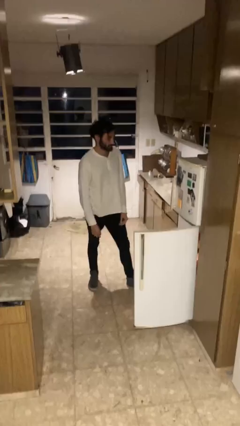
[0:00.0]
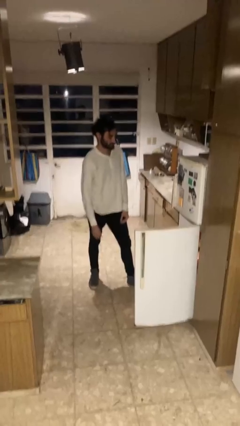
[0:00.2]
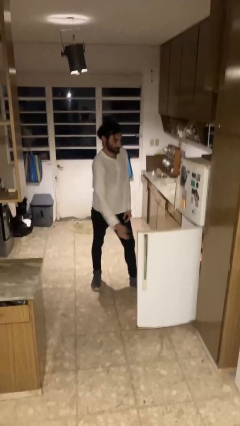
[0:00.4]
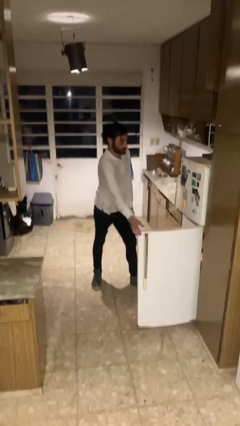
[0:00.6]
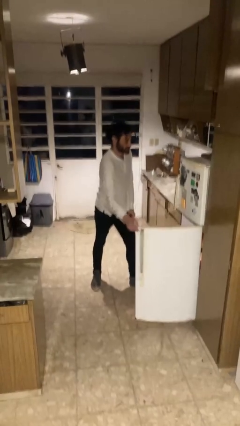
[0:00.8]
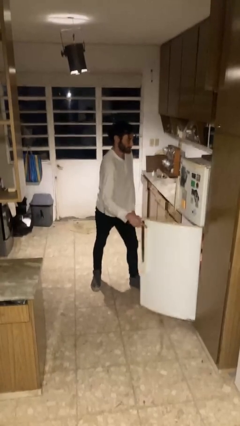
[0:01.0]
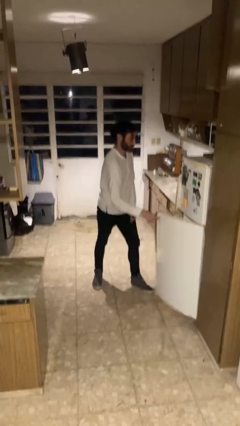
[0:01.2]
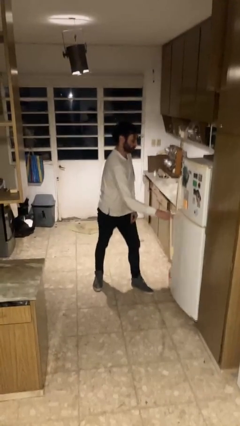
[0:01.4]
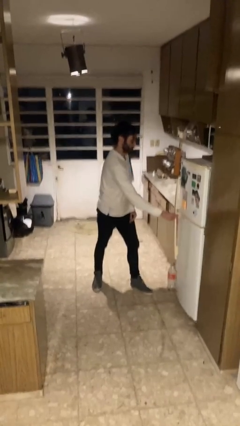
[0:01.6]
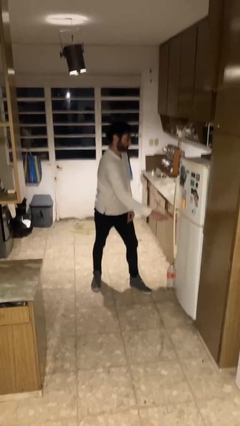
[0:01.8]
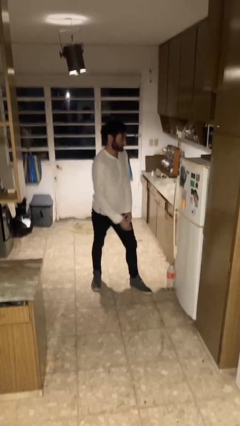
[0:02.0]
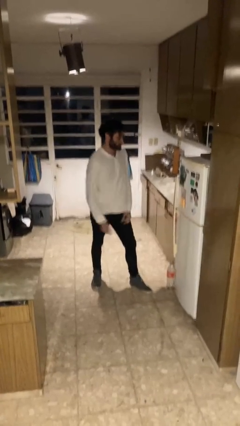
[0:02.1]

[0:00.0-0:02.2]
person closes refrigerator

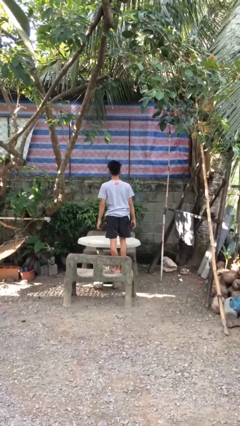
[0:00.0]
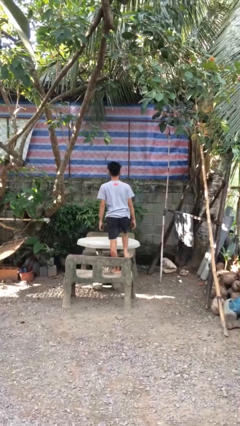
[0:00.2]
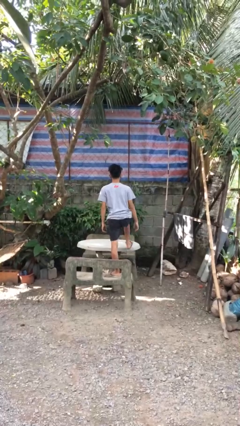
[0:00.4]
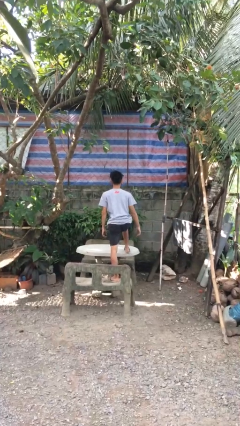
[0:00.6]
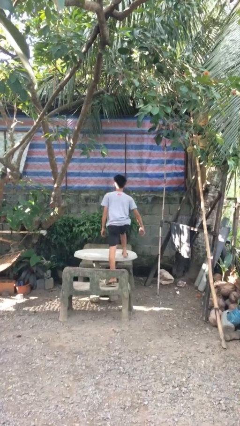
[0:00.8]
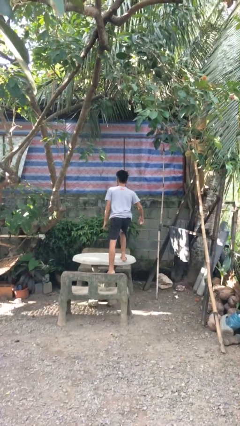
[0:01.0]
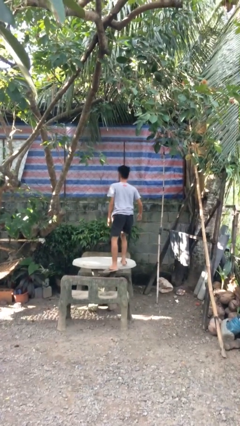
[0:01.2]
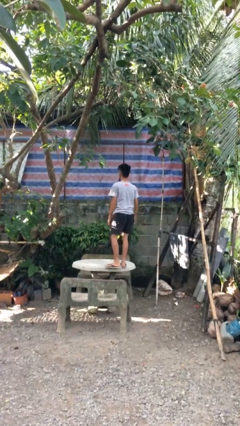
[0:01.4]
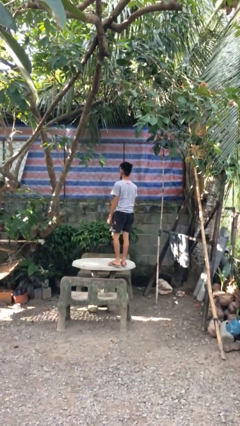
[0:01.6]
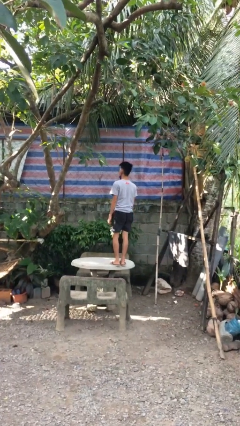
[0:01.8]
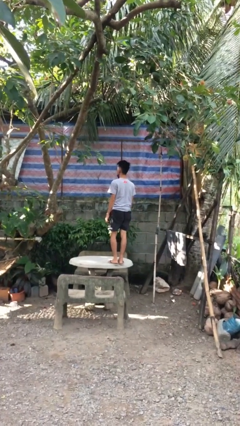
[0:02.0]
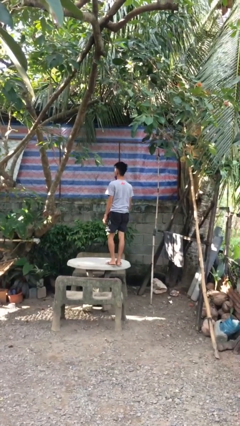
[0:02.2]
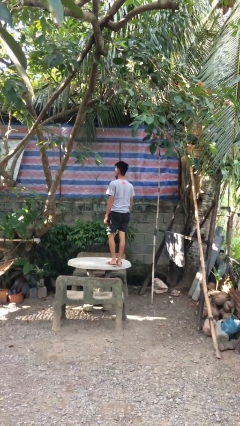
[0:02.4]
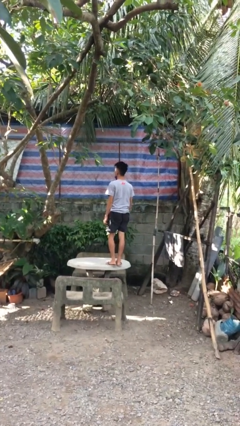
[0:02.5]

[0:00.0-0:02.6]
person climbs on table

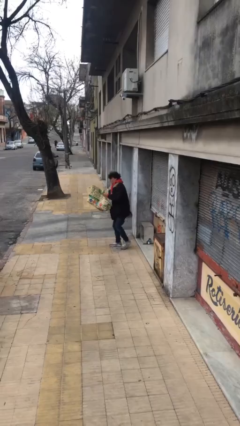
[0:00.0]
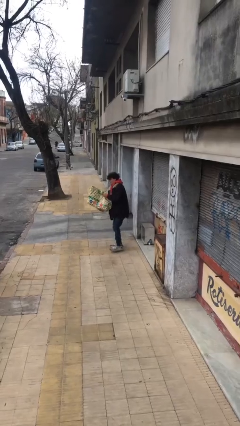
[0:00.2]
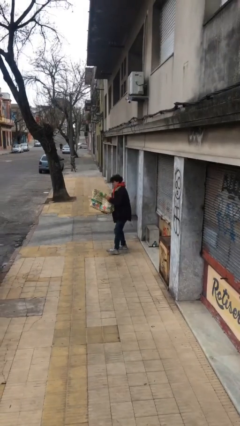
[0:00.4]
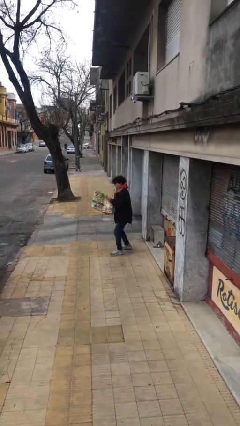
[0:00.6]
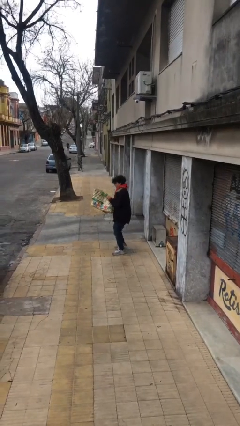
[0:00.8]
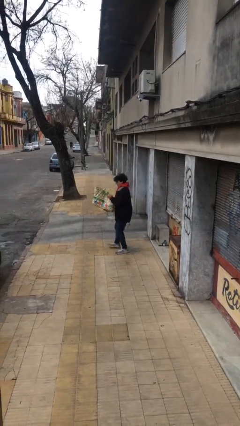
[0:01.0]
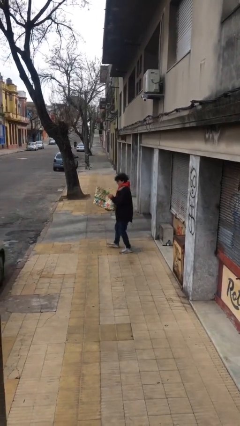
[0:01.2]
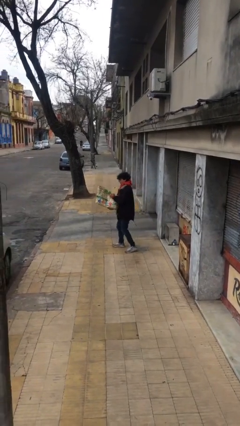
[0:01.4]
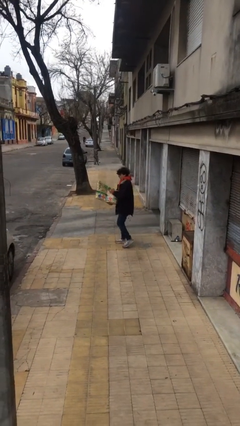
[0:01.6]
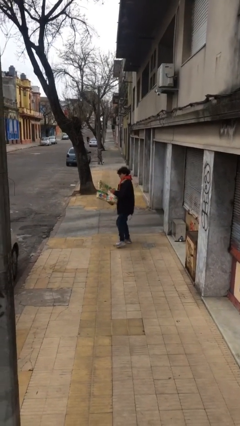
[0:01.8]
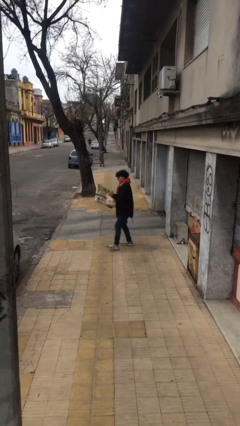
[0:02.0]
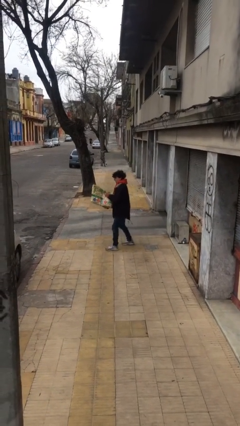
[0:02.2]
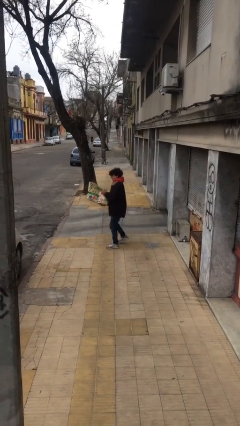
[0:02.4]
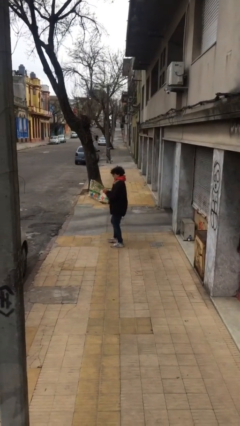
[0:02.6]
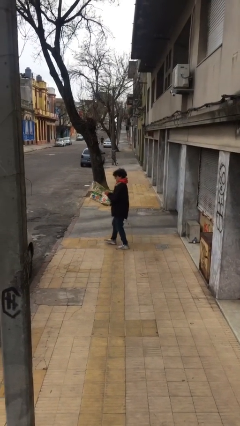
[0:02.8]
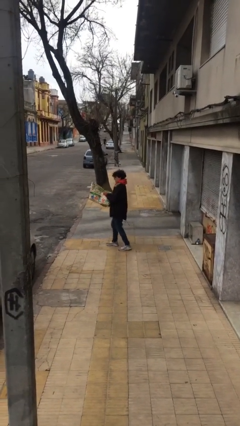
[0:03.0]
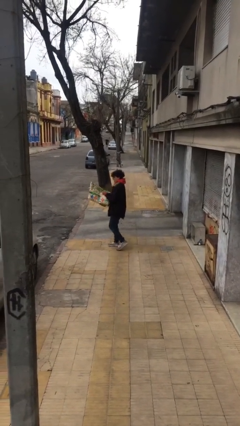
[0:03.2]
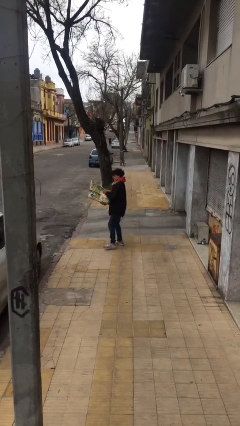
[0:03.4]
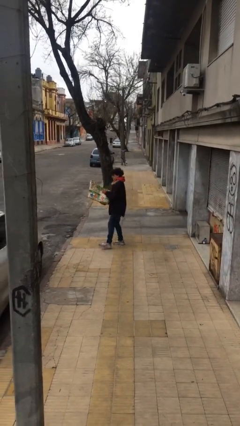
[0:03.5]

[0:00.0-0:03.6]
person carries heavy object

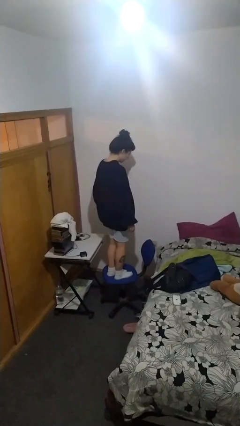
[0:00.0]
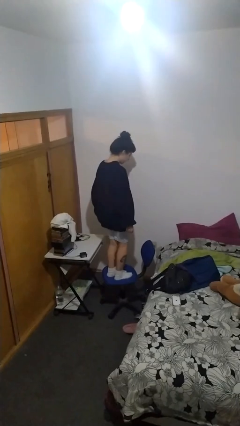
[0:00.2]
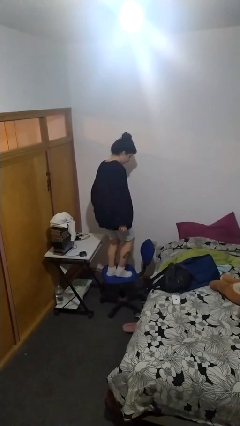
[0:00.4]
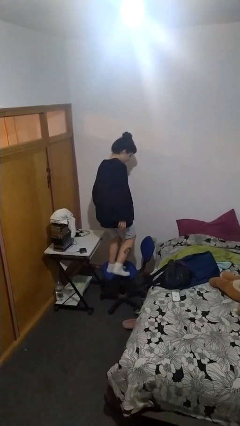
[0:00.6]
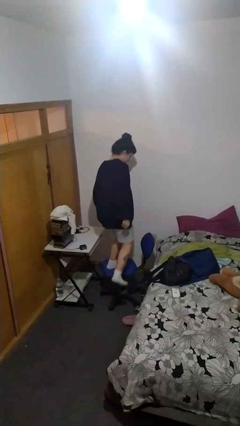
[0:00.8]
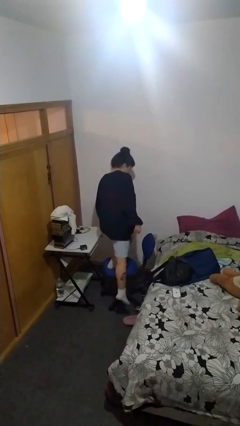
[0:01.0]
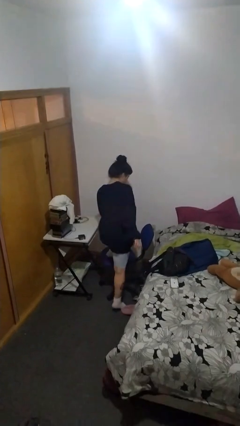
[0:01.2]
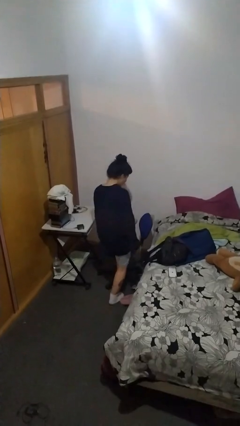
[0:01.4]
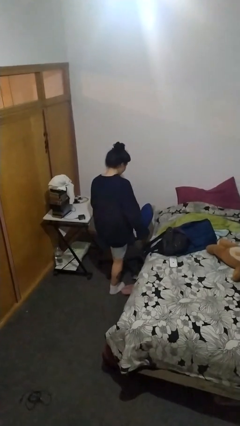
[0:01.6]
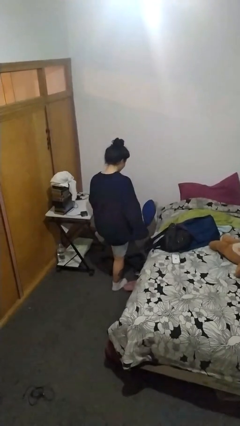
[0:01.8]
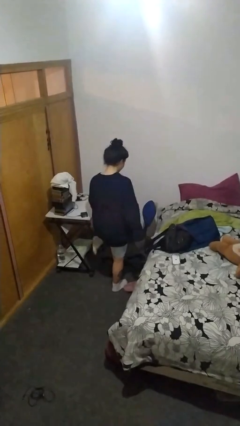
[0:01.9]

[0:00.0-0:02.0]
person climbs off chair

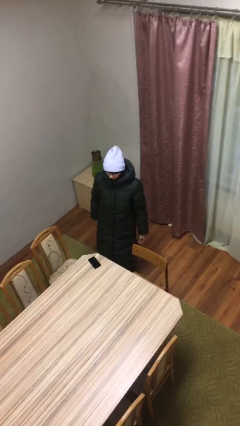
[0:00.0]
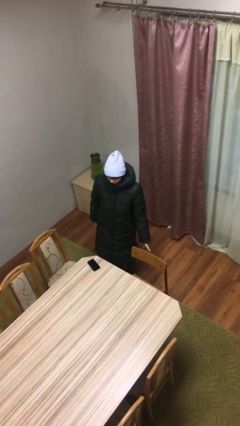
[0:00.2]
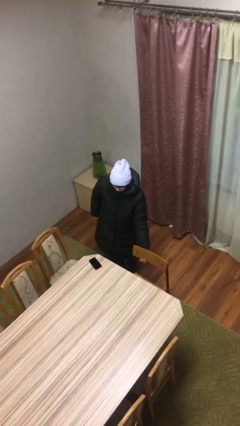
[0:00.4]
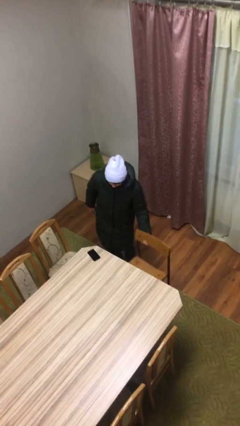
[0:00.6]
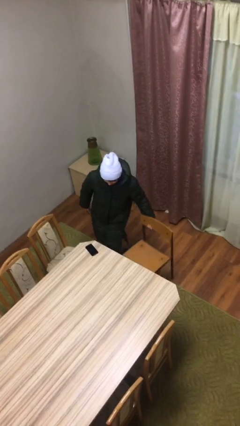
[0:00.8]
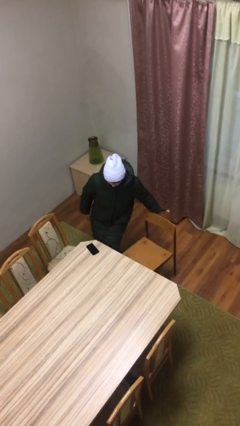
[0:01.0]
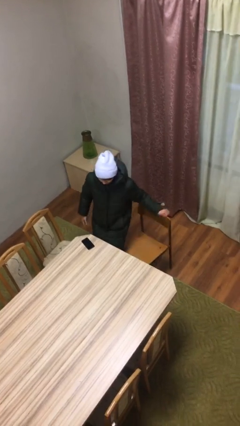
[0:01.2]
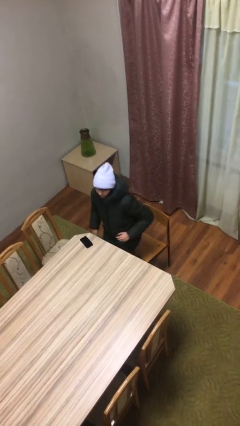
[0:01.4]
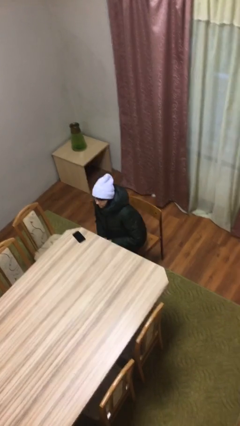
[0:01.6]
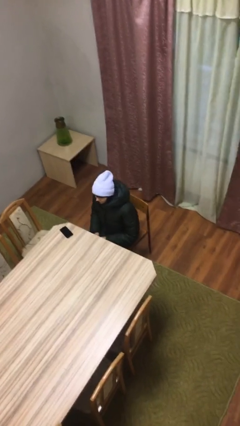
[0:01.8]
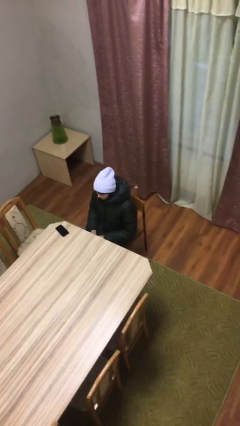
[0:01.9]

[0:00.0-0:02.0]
person sits down

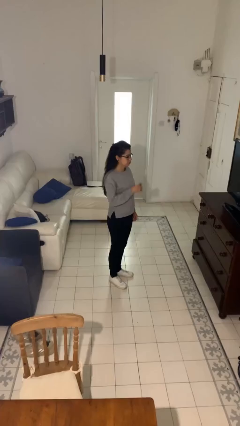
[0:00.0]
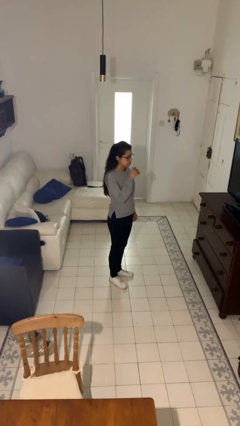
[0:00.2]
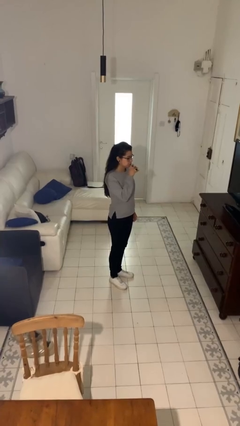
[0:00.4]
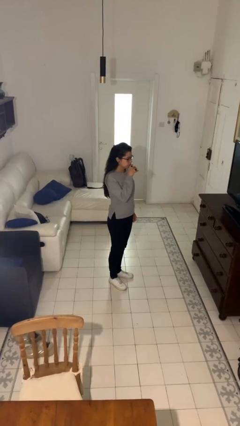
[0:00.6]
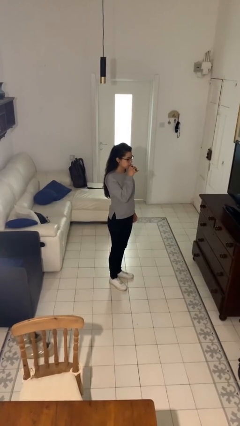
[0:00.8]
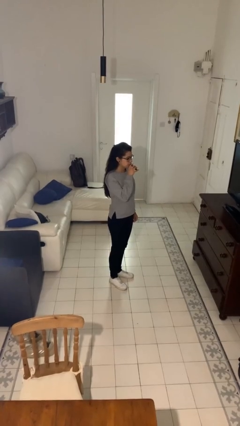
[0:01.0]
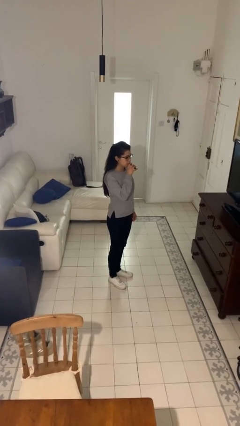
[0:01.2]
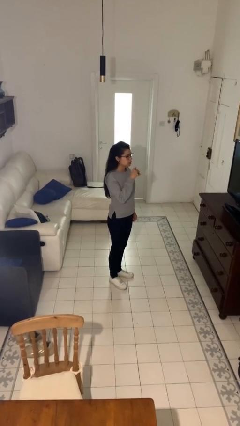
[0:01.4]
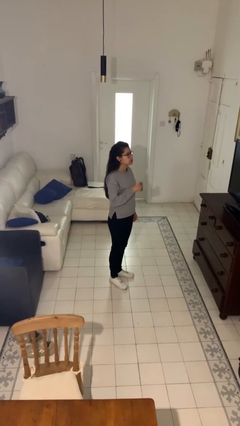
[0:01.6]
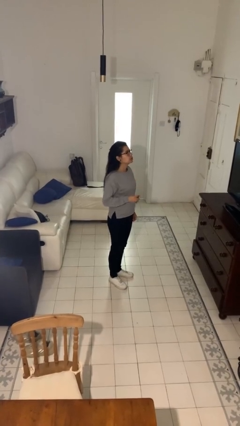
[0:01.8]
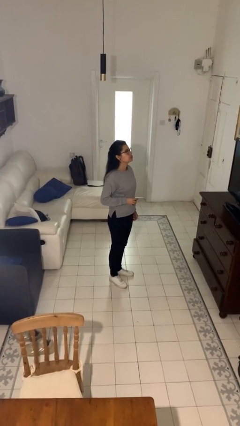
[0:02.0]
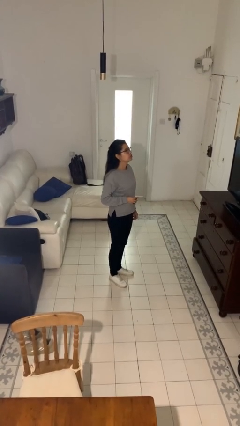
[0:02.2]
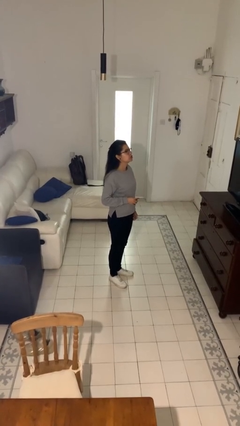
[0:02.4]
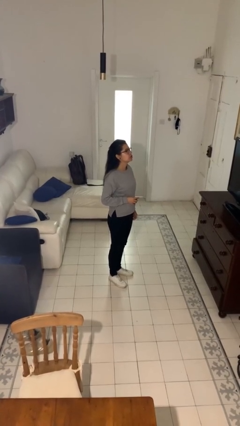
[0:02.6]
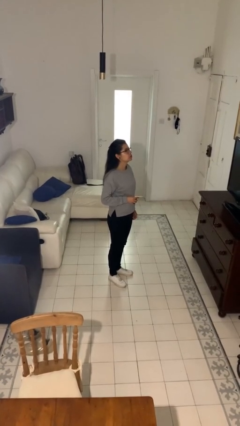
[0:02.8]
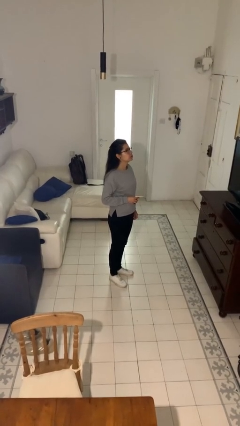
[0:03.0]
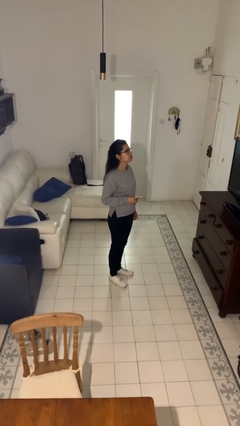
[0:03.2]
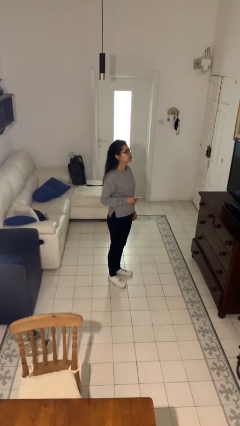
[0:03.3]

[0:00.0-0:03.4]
person vapes

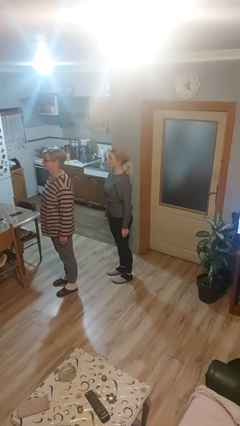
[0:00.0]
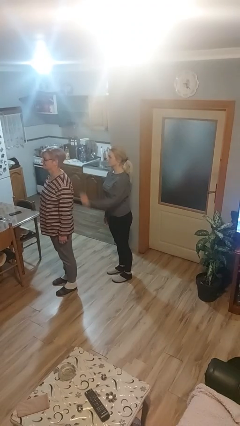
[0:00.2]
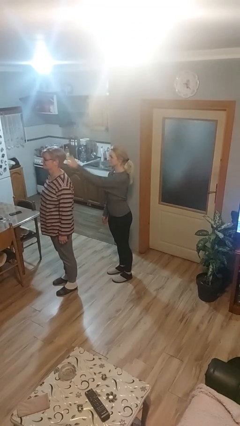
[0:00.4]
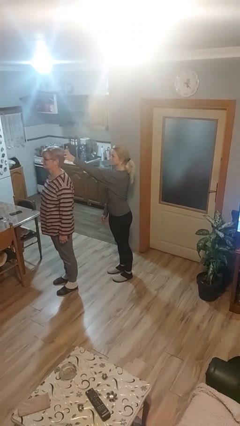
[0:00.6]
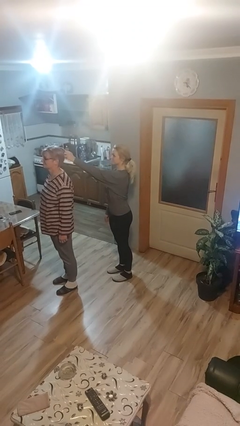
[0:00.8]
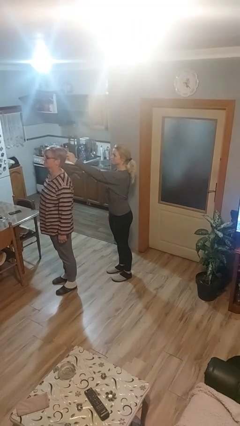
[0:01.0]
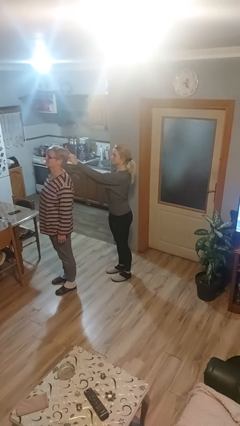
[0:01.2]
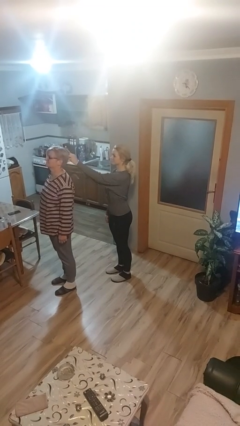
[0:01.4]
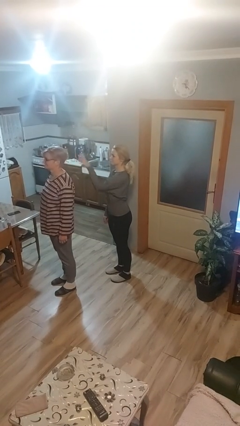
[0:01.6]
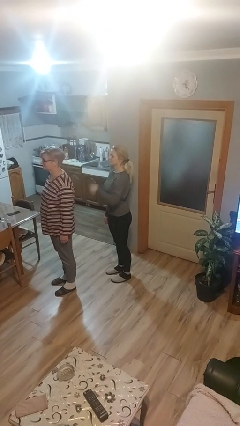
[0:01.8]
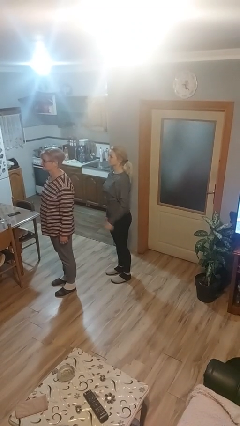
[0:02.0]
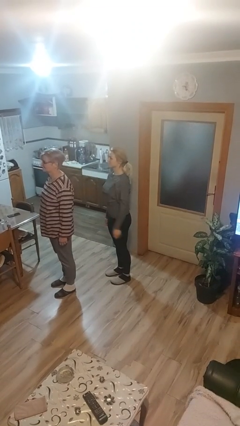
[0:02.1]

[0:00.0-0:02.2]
person grabs person by hair
